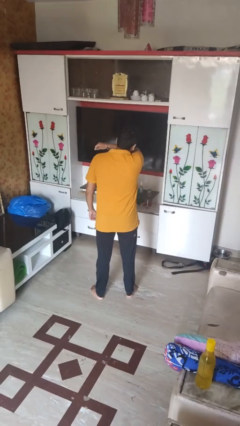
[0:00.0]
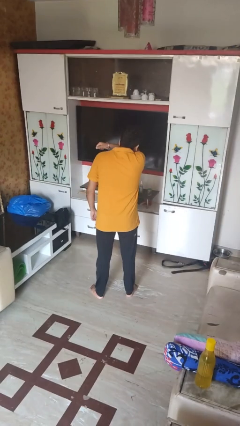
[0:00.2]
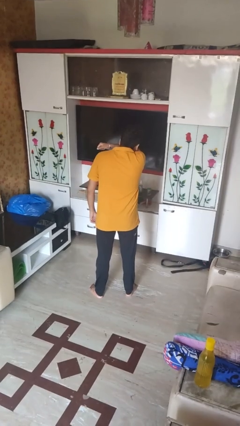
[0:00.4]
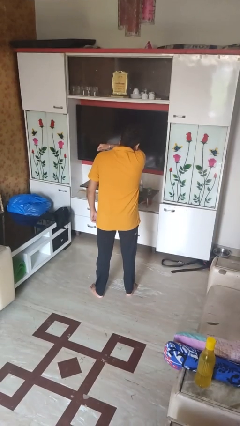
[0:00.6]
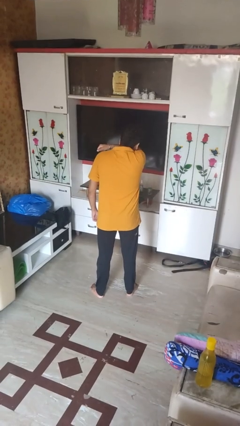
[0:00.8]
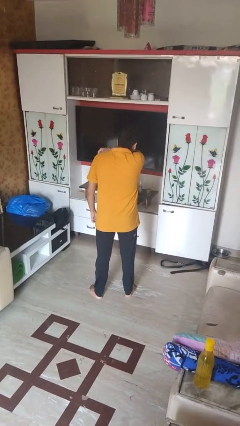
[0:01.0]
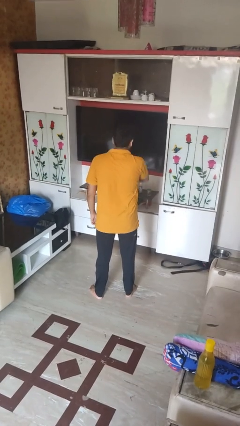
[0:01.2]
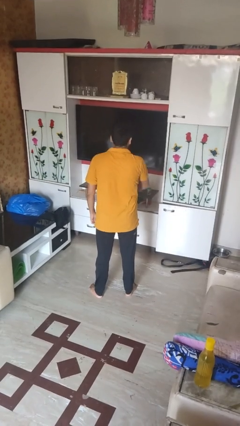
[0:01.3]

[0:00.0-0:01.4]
person sneezes into arm

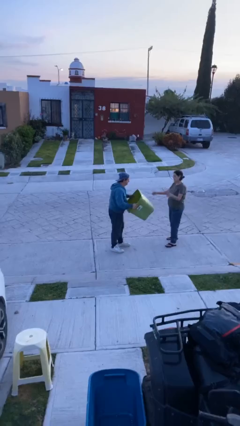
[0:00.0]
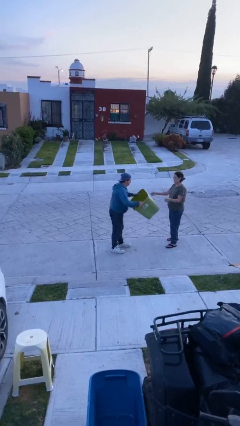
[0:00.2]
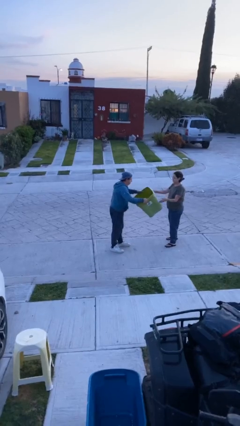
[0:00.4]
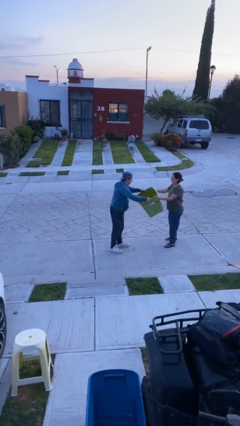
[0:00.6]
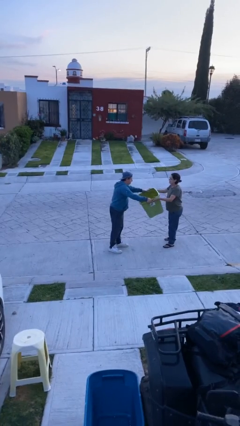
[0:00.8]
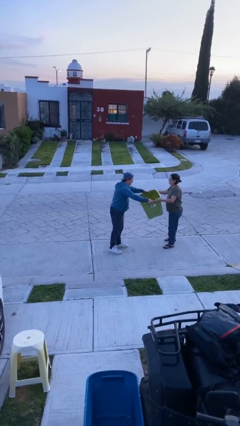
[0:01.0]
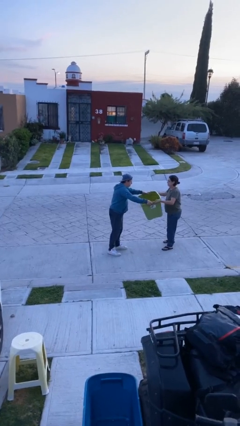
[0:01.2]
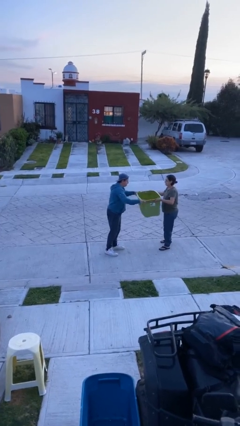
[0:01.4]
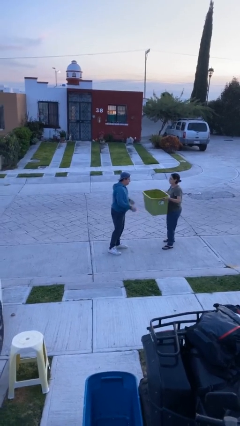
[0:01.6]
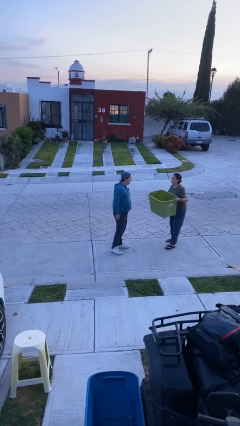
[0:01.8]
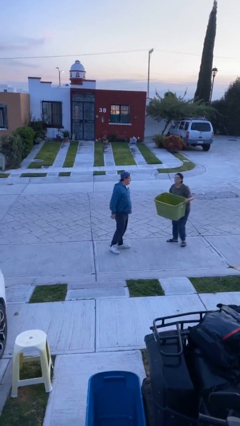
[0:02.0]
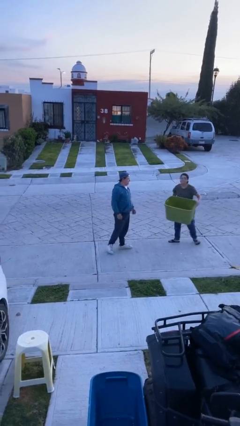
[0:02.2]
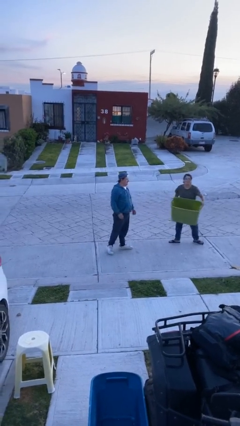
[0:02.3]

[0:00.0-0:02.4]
person transfers object to person

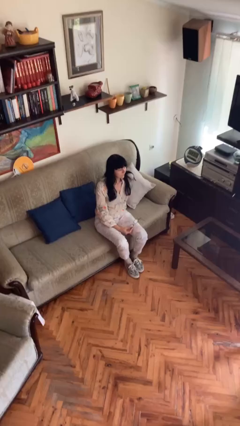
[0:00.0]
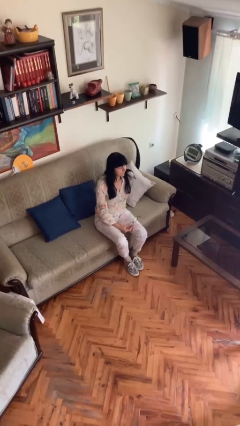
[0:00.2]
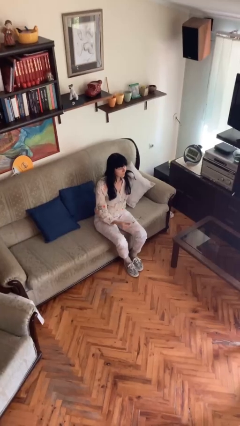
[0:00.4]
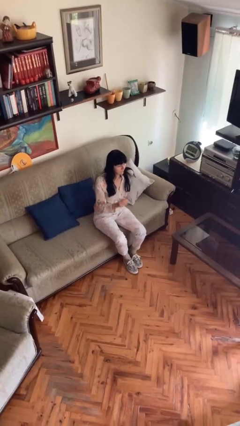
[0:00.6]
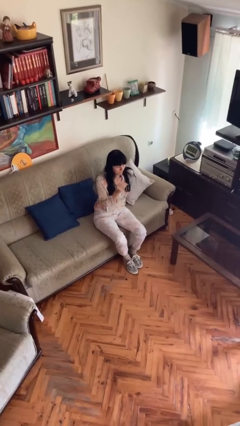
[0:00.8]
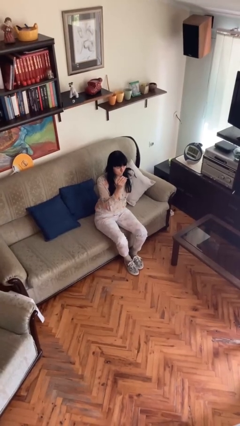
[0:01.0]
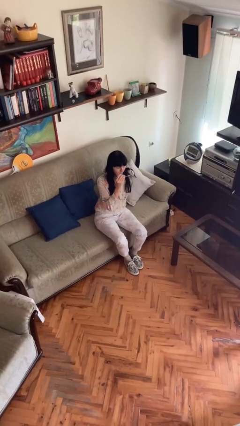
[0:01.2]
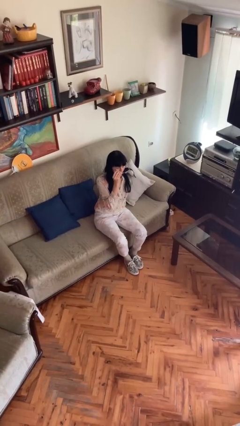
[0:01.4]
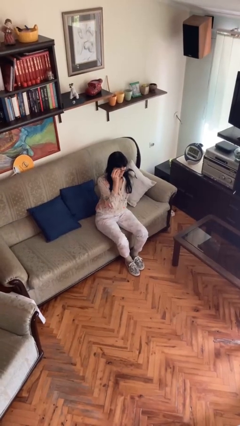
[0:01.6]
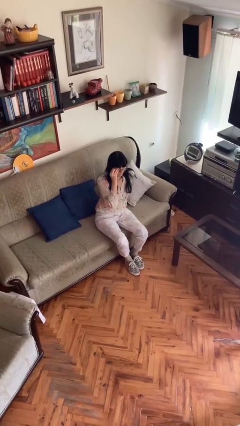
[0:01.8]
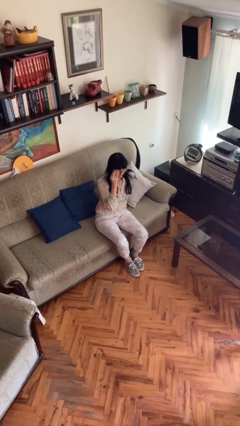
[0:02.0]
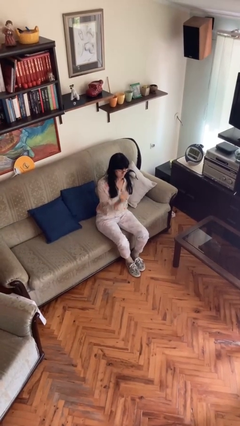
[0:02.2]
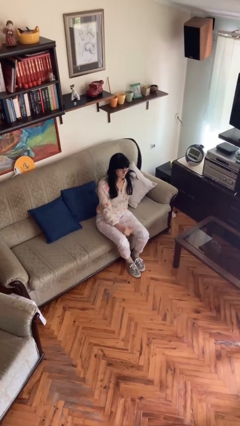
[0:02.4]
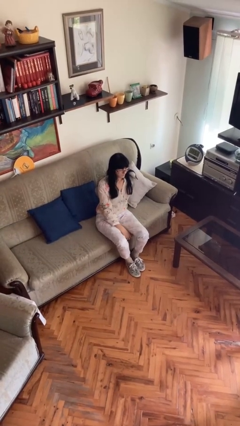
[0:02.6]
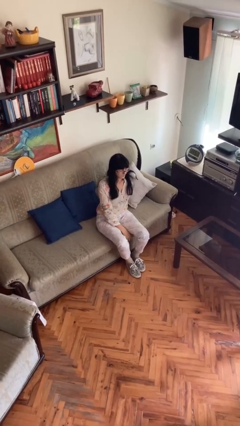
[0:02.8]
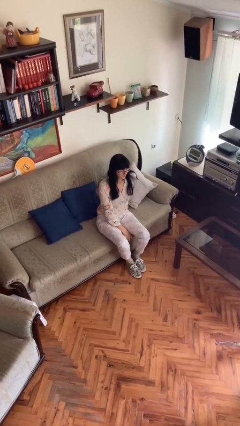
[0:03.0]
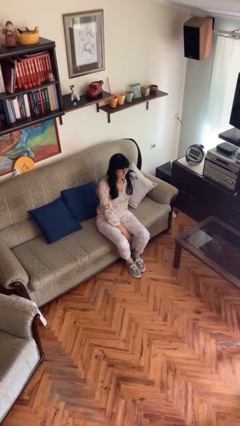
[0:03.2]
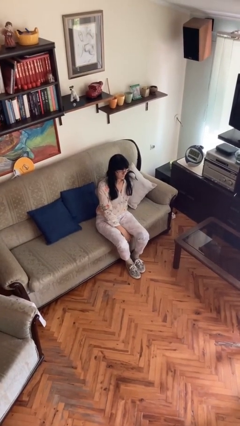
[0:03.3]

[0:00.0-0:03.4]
person puts on glasses

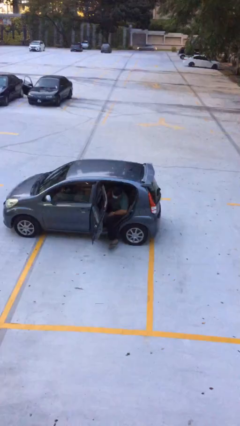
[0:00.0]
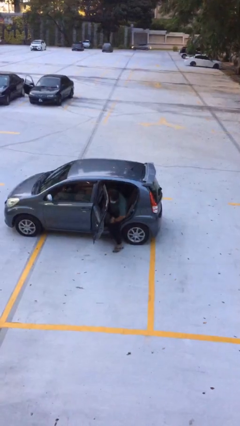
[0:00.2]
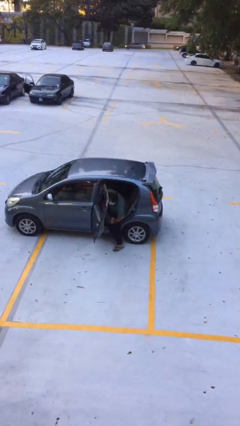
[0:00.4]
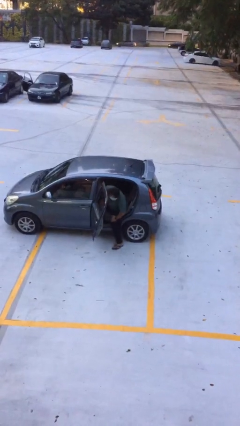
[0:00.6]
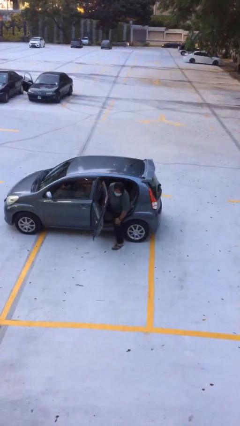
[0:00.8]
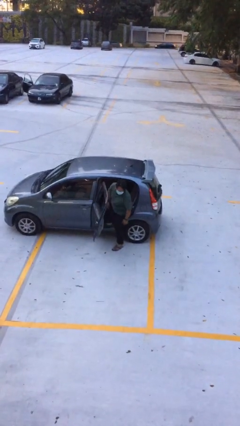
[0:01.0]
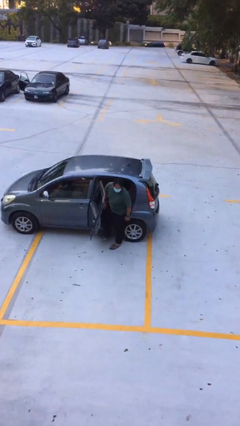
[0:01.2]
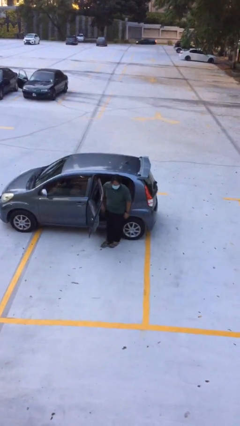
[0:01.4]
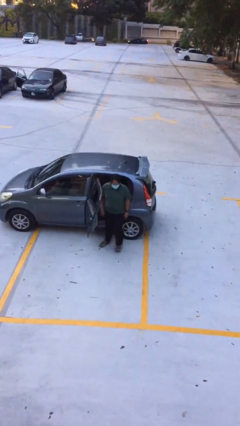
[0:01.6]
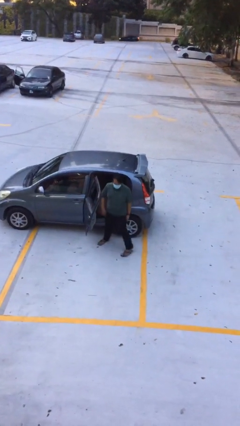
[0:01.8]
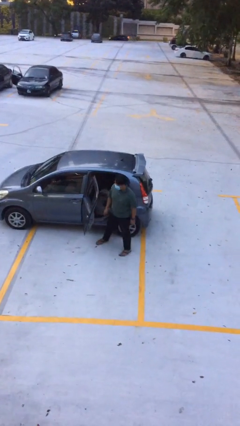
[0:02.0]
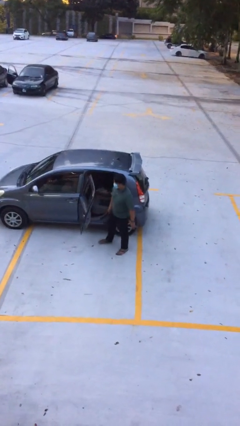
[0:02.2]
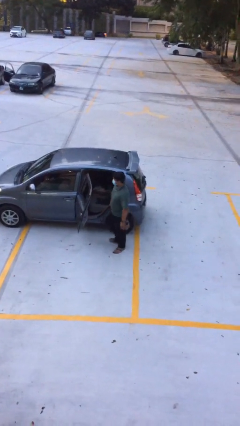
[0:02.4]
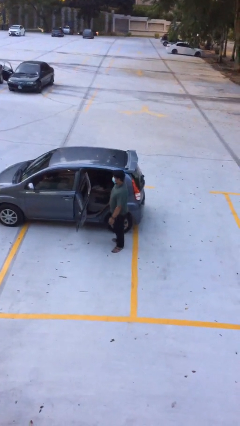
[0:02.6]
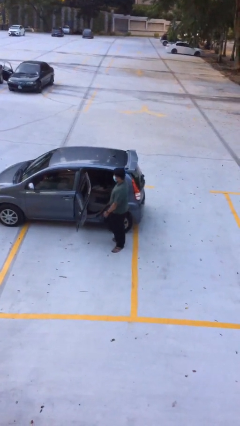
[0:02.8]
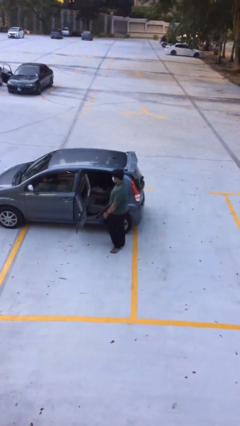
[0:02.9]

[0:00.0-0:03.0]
person exits car

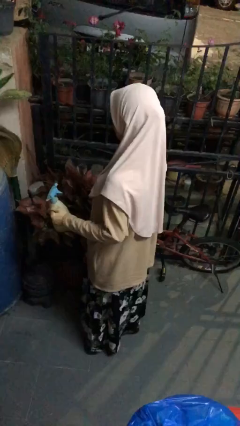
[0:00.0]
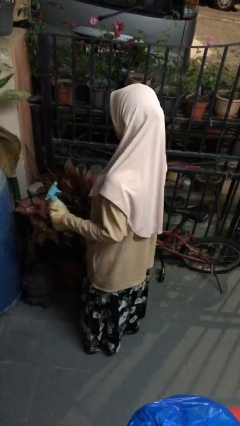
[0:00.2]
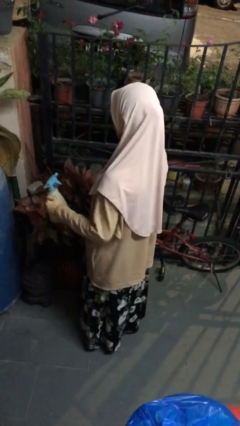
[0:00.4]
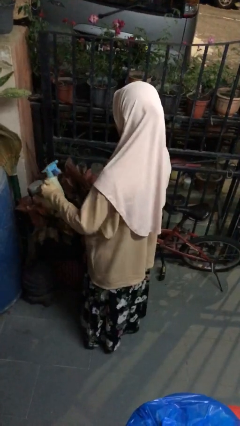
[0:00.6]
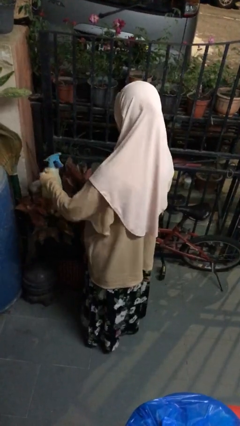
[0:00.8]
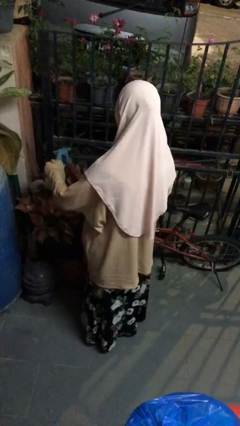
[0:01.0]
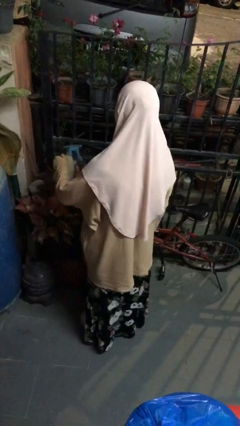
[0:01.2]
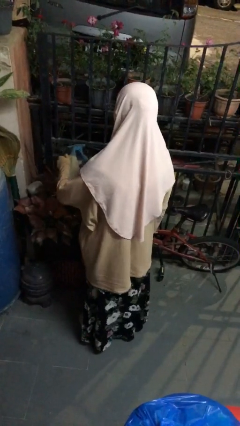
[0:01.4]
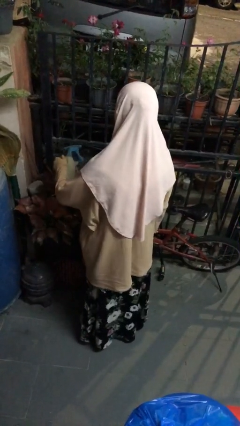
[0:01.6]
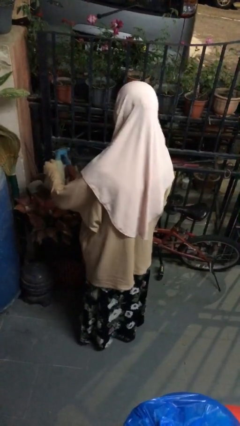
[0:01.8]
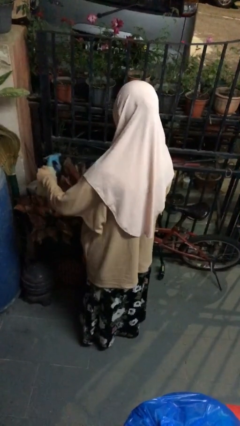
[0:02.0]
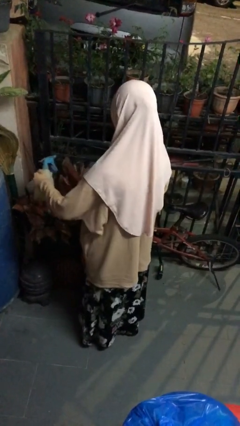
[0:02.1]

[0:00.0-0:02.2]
person waters houseplant

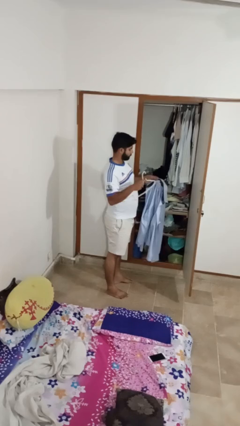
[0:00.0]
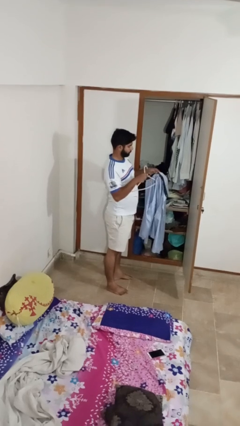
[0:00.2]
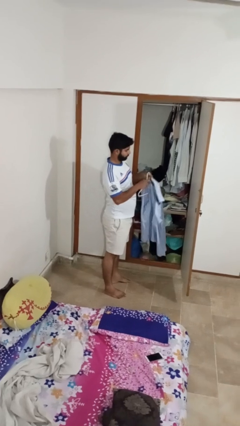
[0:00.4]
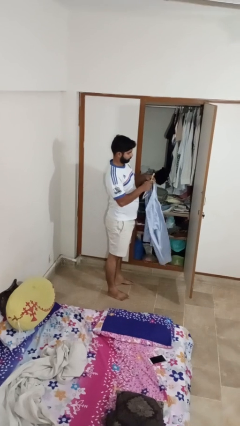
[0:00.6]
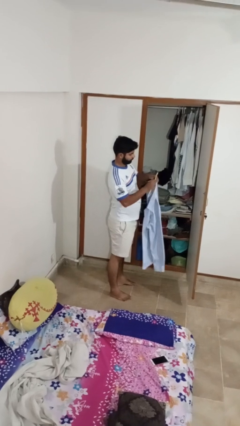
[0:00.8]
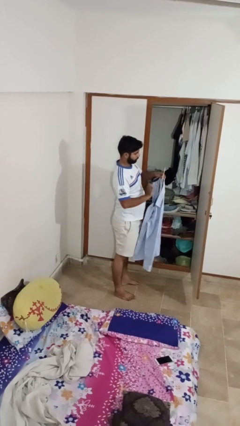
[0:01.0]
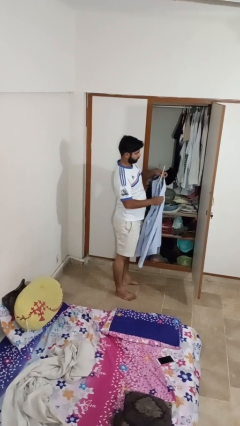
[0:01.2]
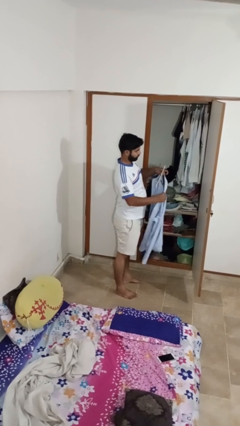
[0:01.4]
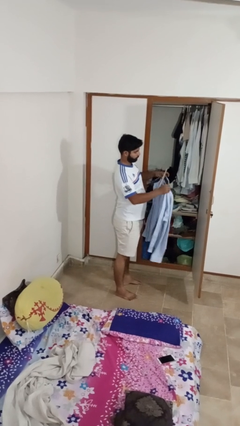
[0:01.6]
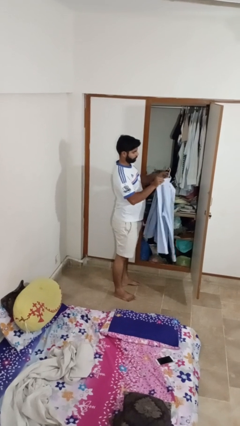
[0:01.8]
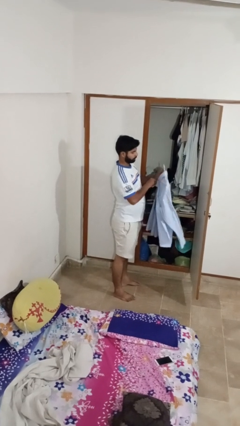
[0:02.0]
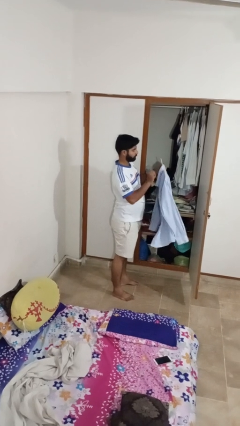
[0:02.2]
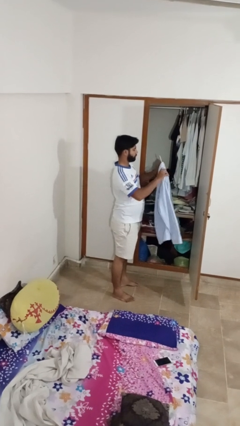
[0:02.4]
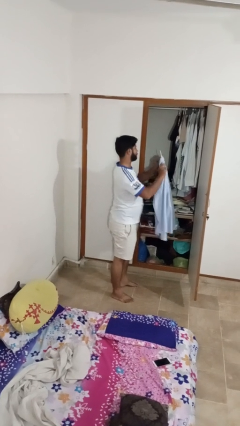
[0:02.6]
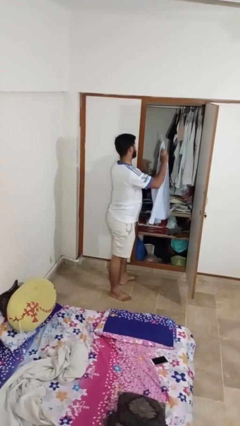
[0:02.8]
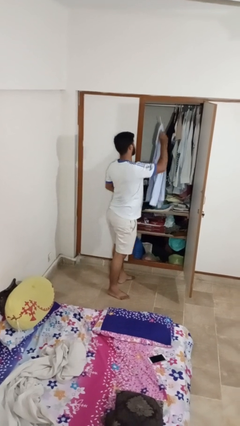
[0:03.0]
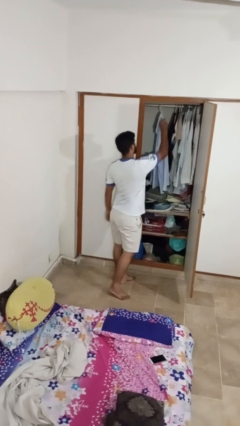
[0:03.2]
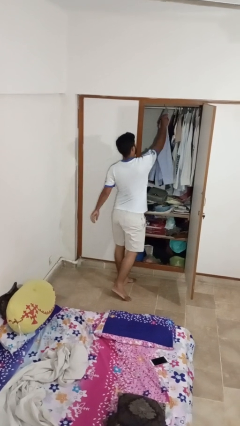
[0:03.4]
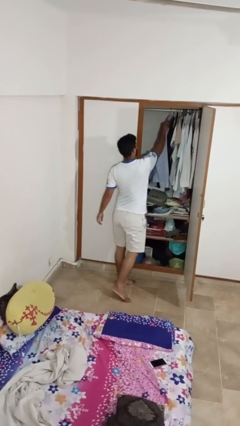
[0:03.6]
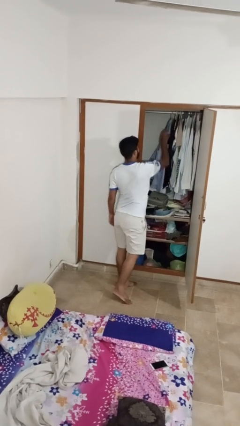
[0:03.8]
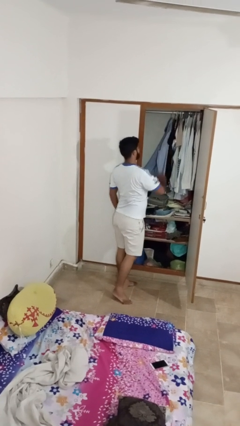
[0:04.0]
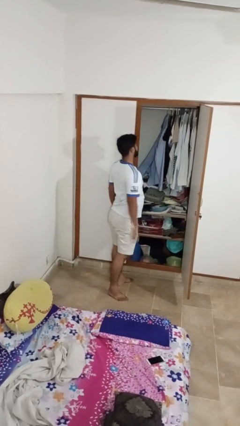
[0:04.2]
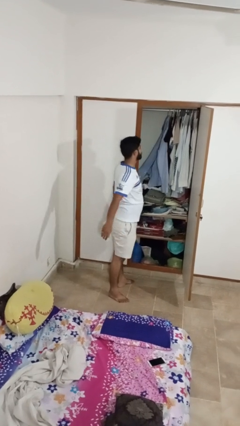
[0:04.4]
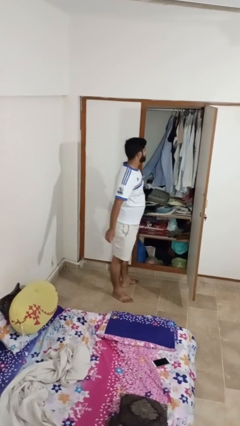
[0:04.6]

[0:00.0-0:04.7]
person puts clothes into closet
